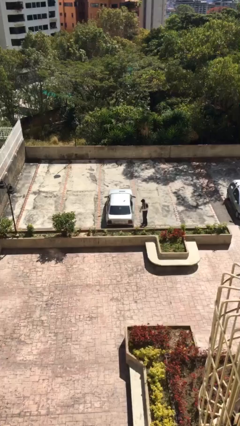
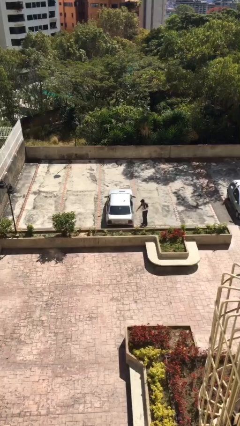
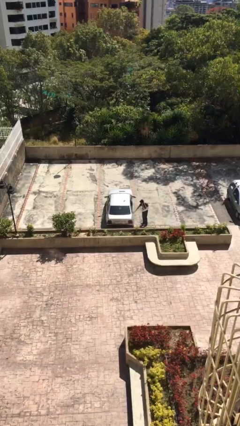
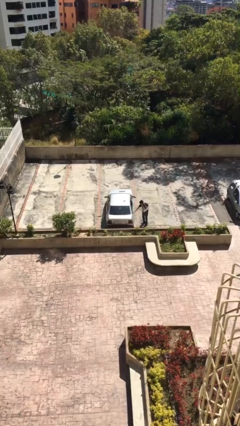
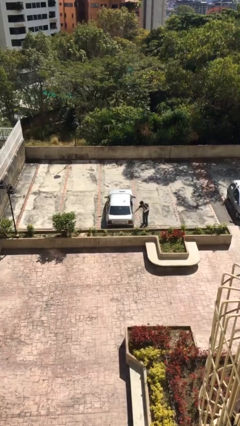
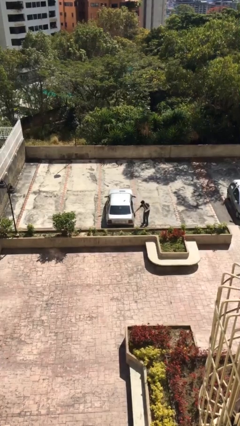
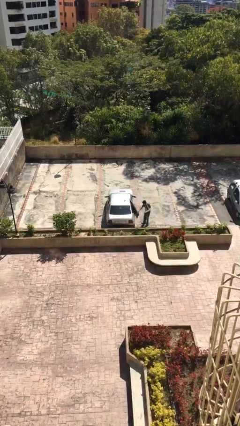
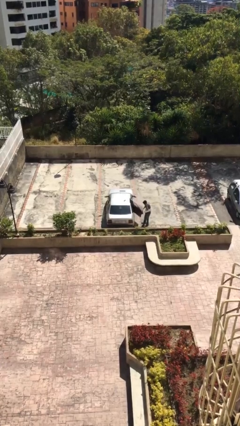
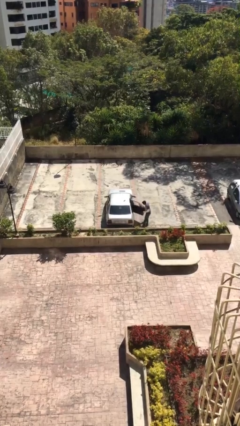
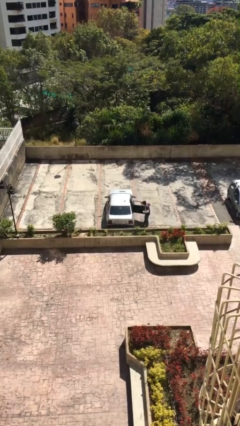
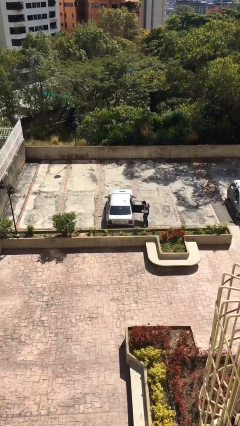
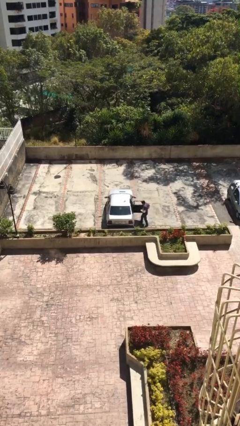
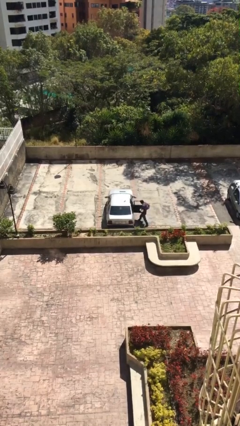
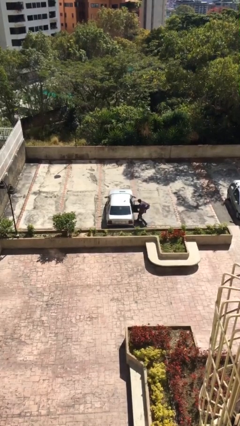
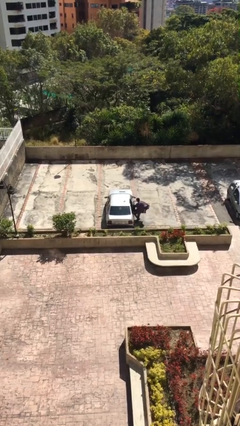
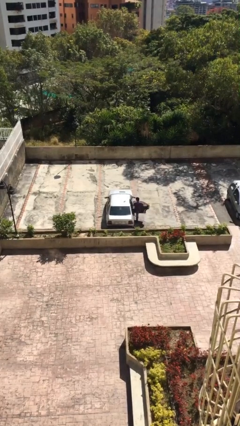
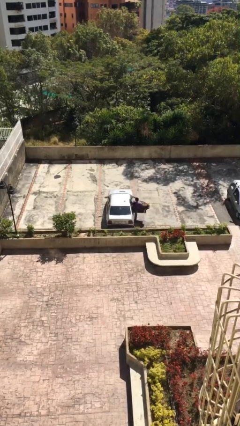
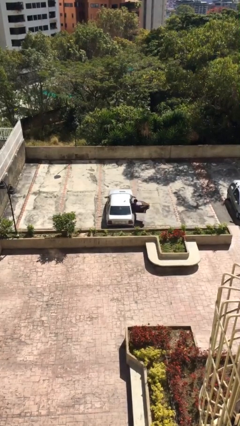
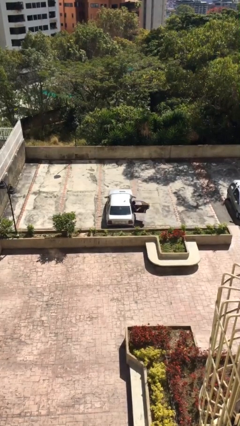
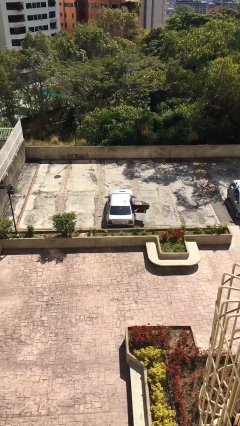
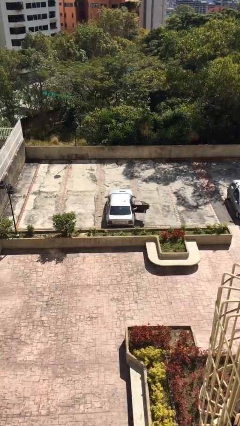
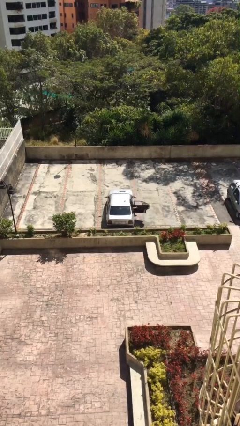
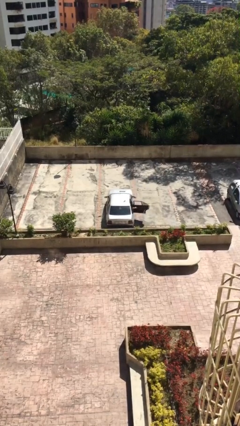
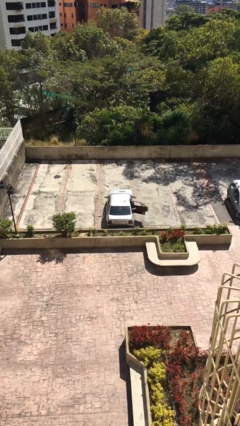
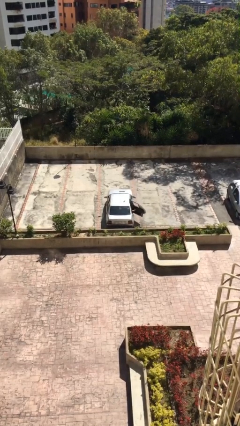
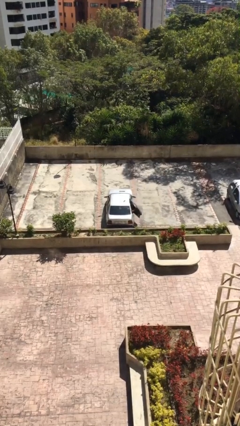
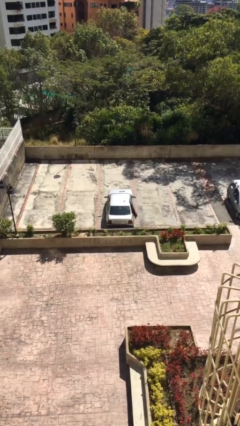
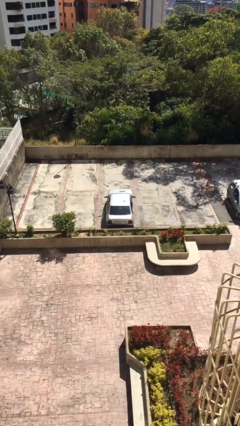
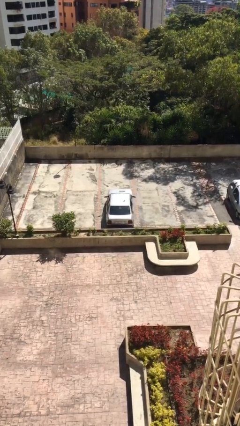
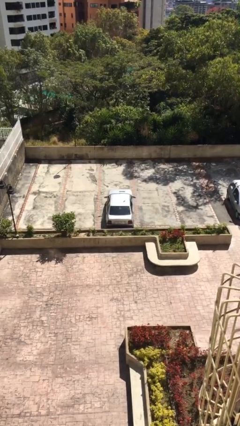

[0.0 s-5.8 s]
car picks up person

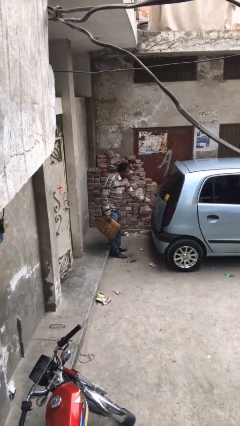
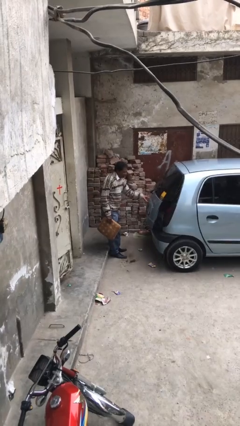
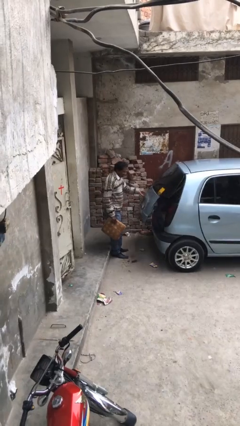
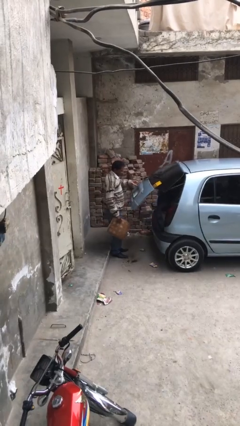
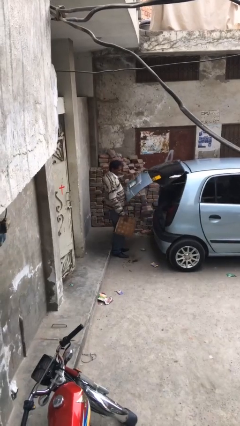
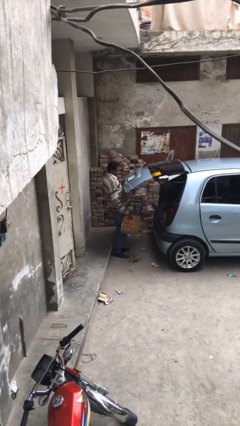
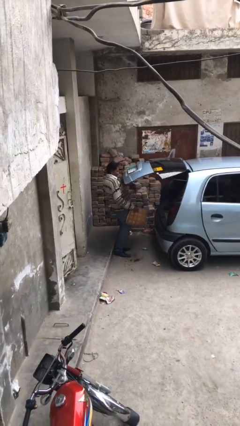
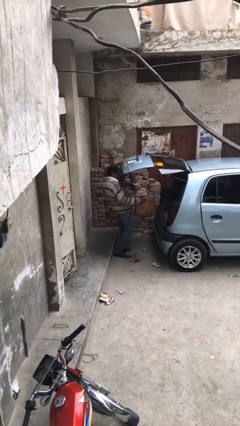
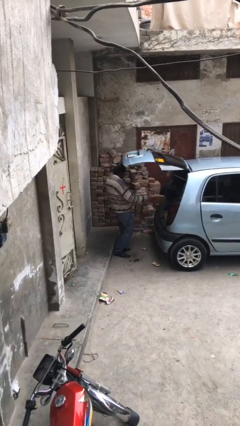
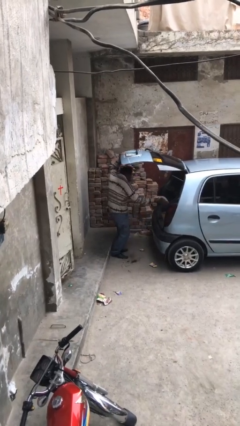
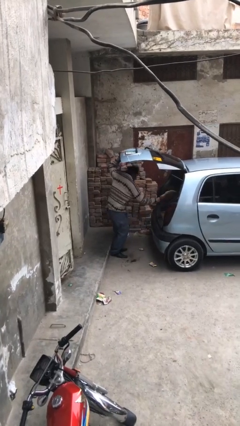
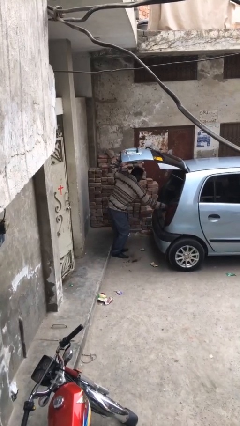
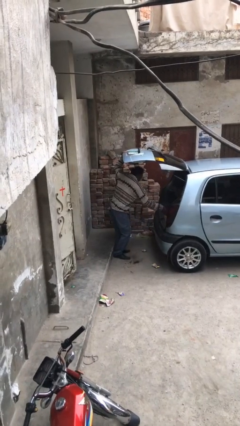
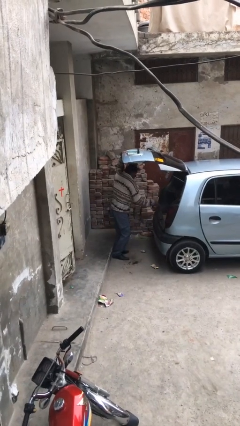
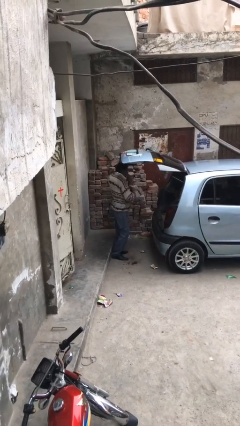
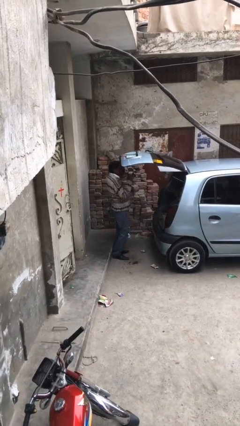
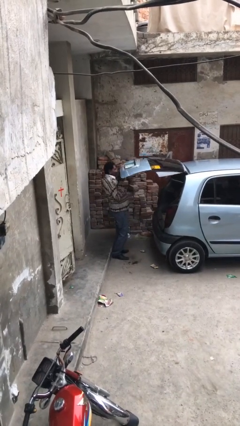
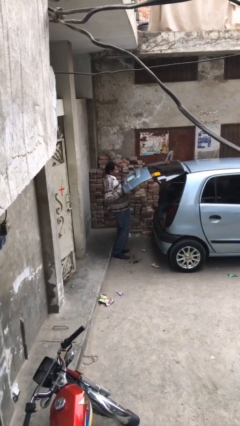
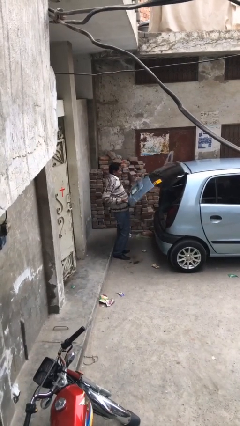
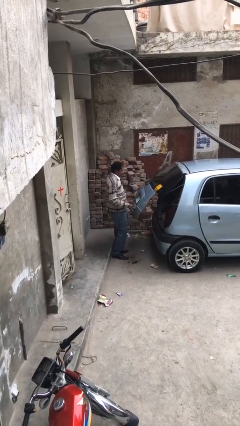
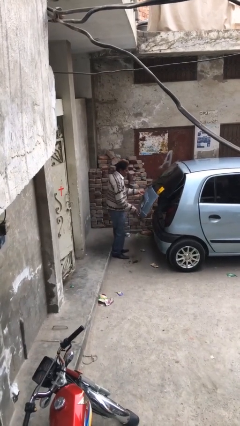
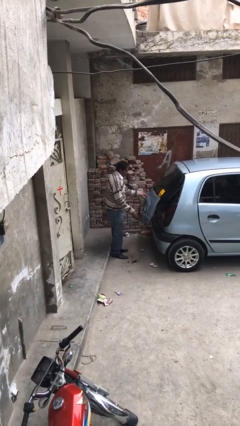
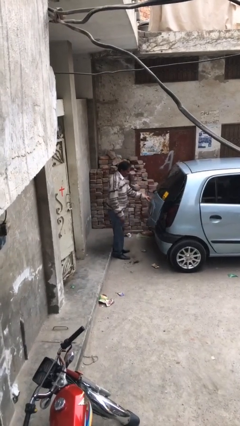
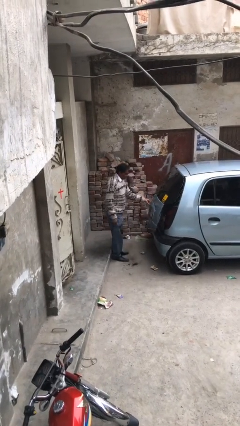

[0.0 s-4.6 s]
person loads car

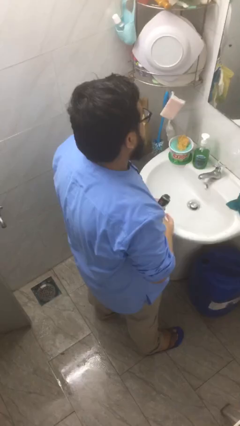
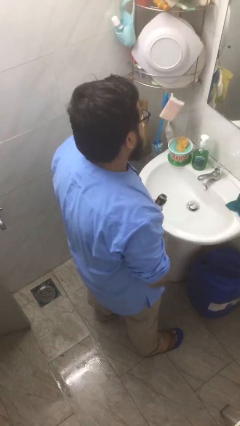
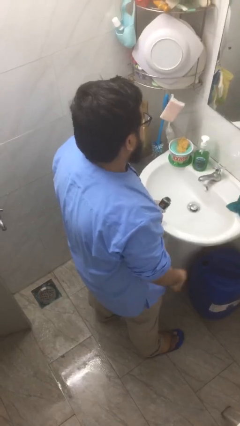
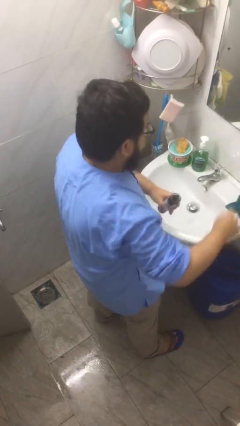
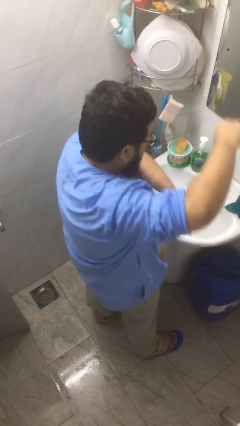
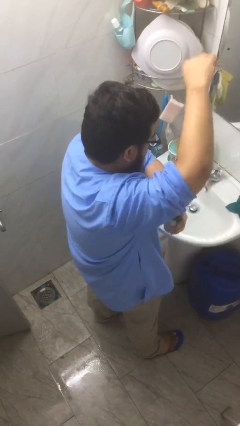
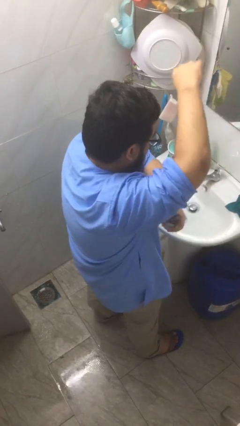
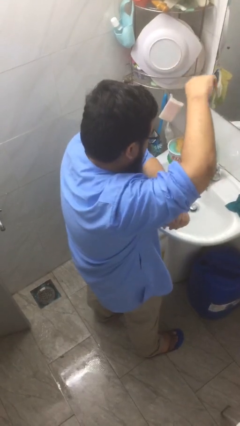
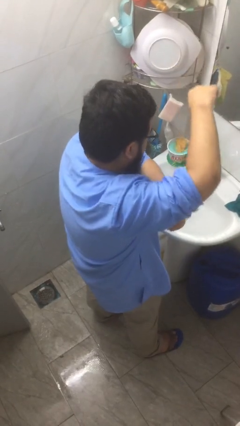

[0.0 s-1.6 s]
person applies deodorant

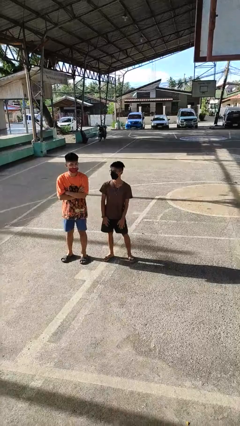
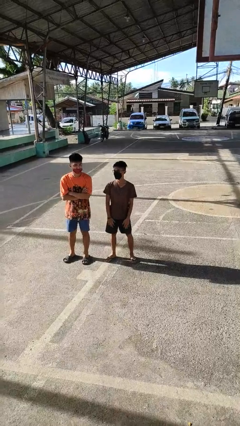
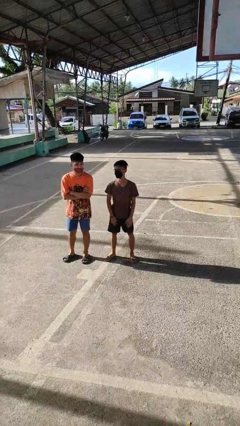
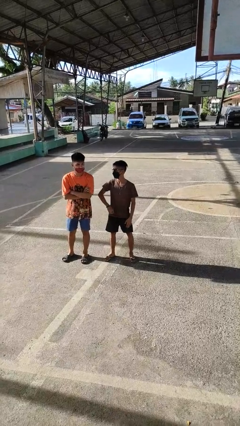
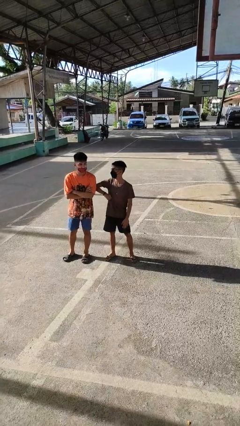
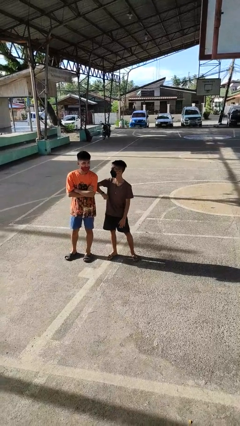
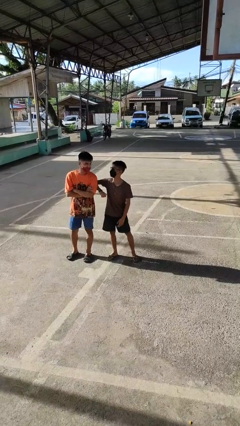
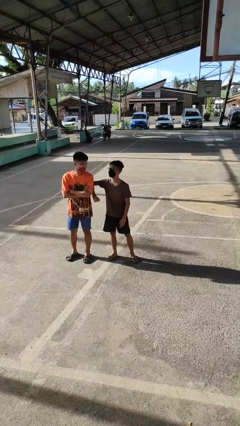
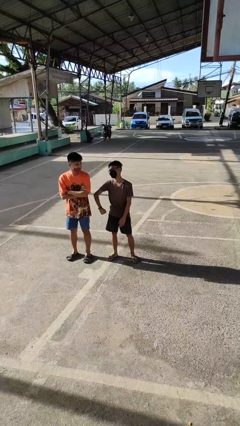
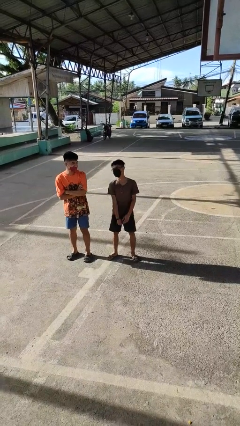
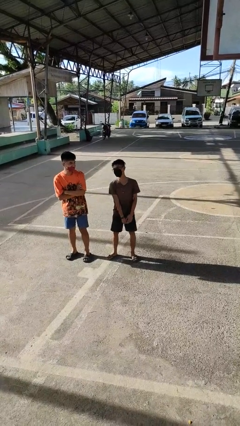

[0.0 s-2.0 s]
person nudges person with elbow

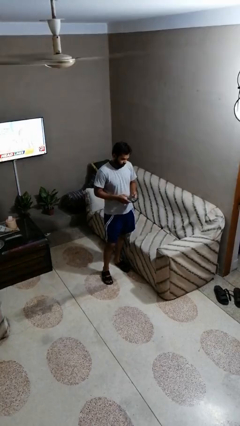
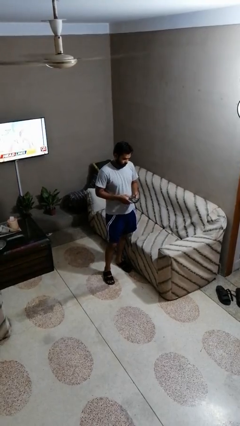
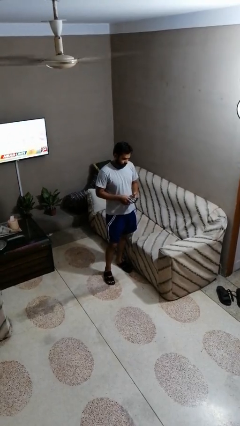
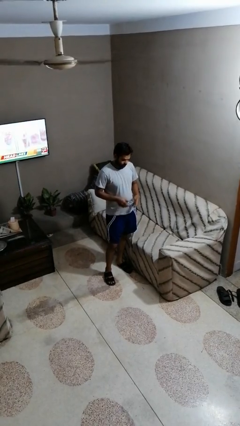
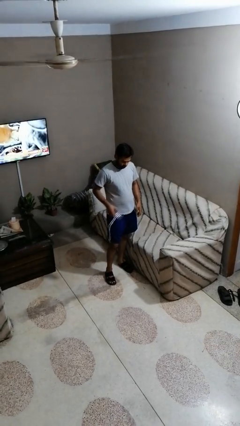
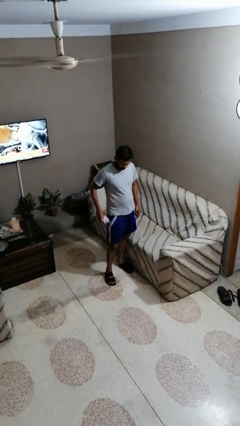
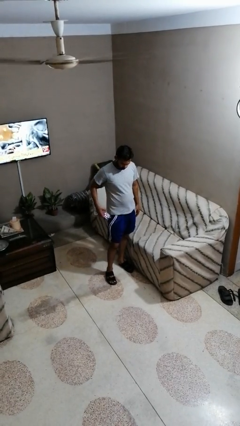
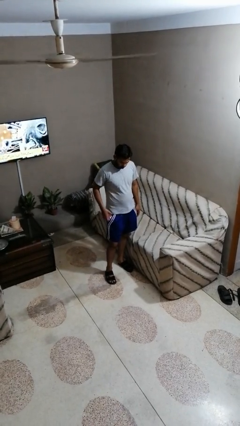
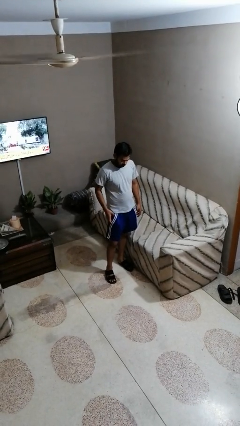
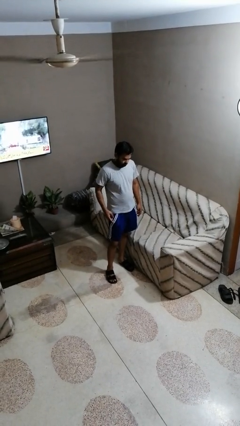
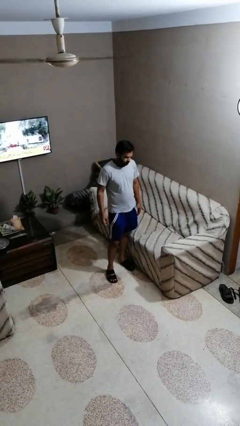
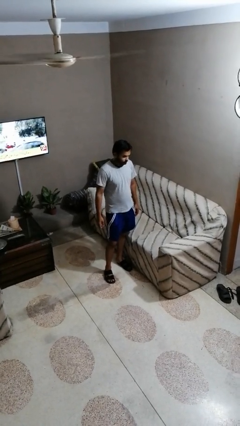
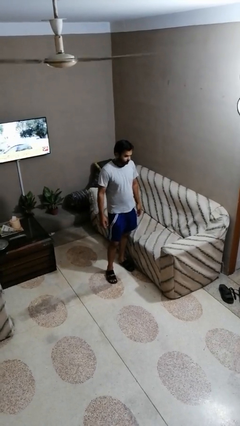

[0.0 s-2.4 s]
person puts phone into pocket

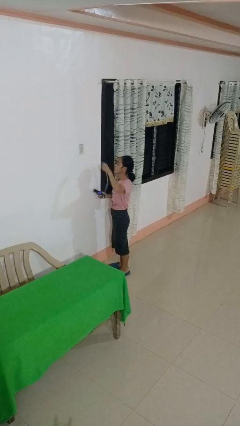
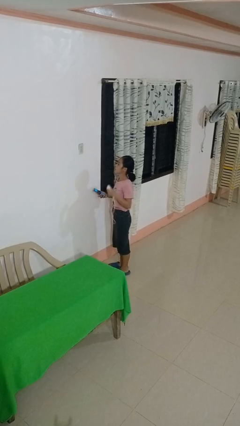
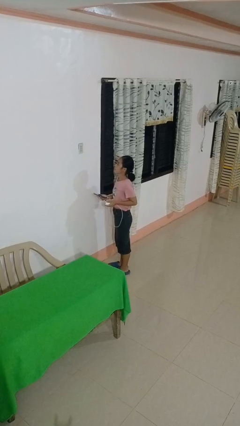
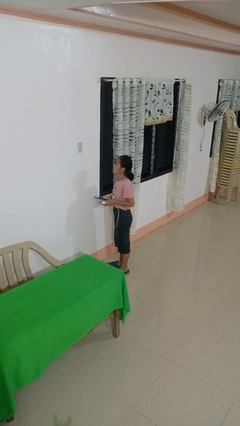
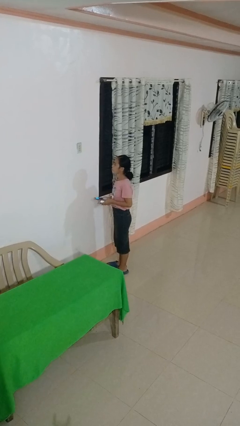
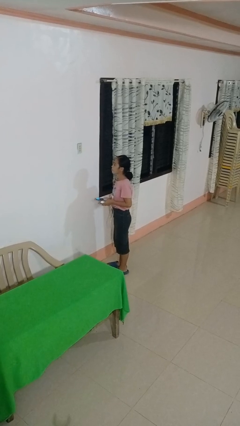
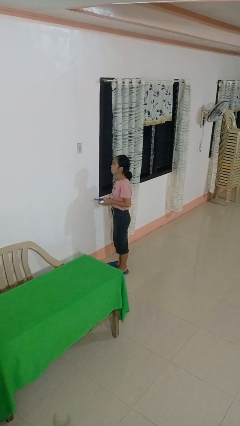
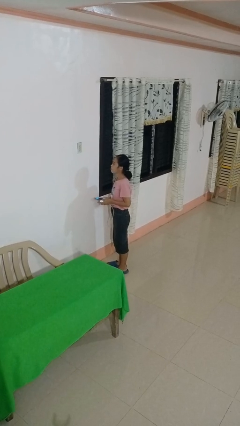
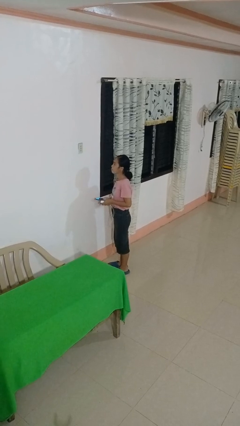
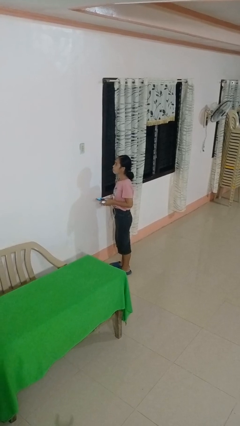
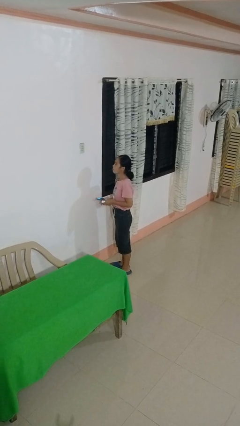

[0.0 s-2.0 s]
person unplugs from electrical socket
